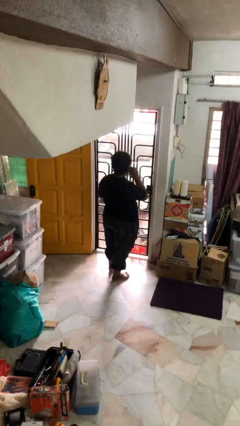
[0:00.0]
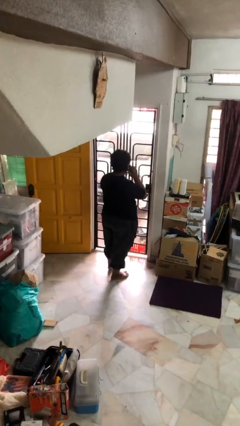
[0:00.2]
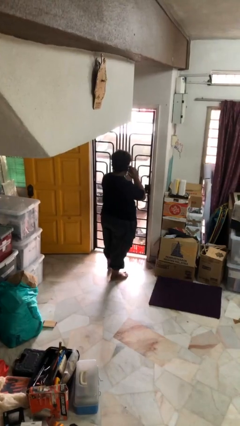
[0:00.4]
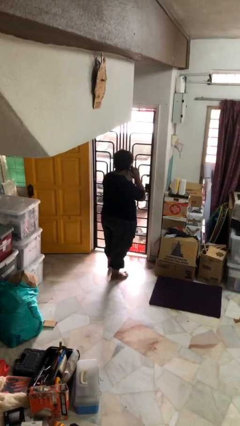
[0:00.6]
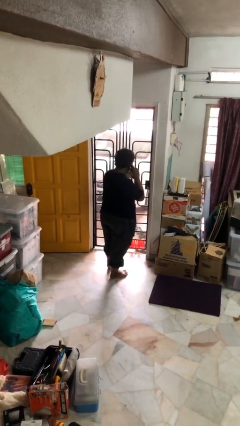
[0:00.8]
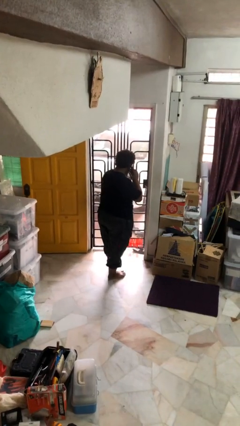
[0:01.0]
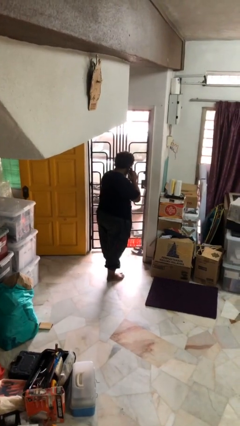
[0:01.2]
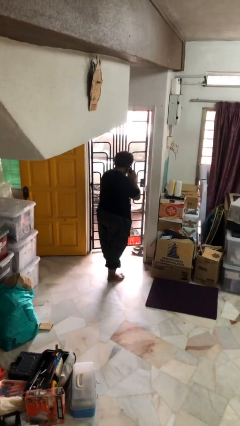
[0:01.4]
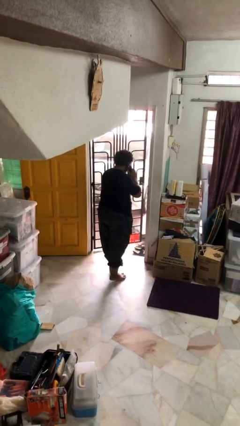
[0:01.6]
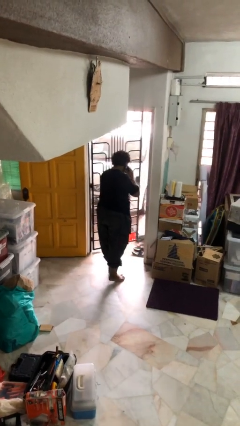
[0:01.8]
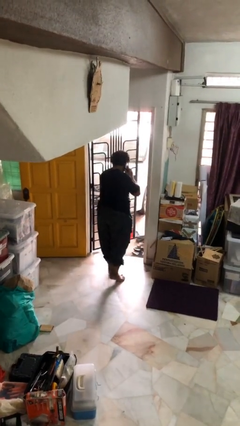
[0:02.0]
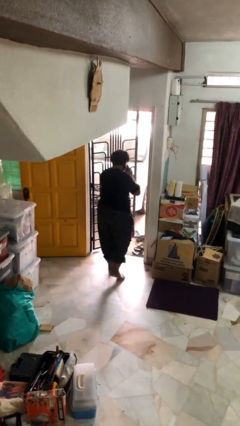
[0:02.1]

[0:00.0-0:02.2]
person opens facility door

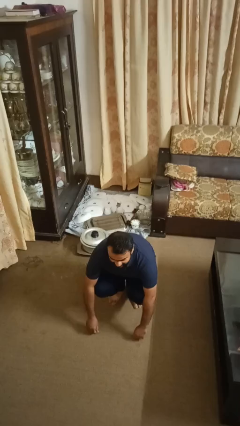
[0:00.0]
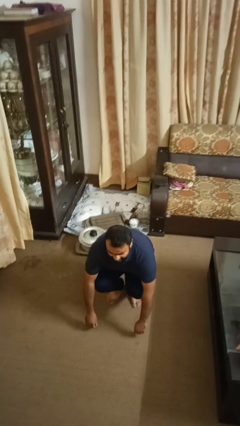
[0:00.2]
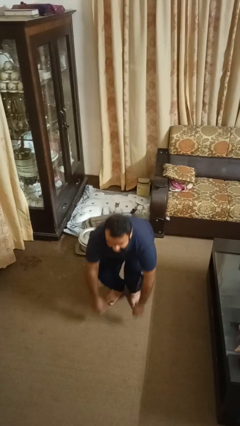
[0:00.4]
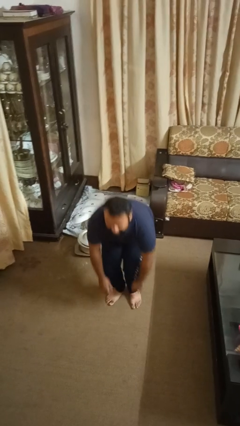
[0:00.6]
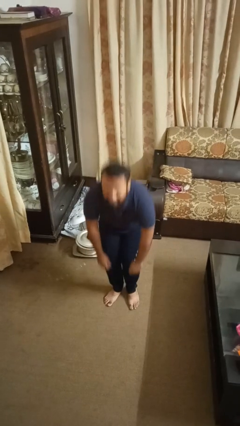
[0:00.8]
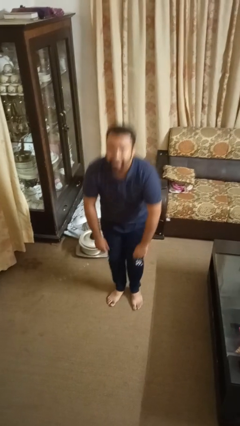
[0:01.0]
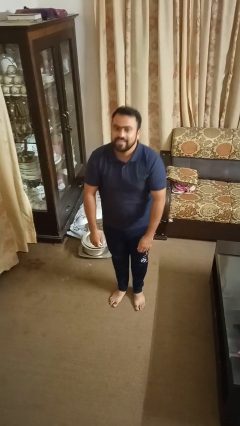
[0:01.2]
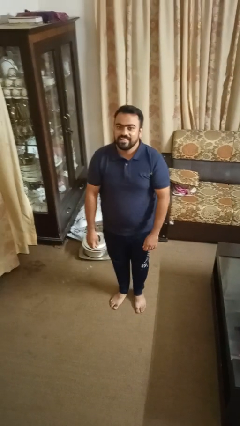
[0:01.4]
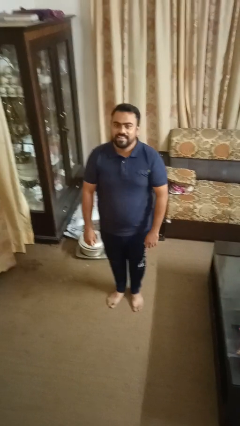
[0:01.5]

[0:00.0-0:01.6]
person stands up

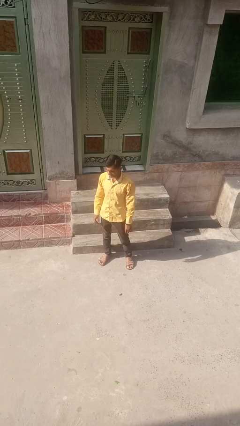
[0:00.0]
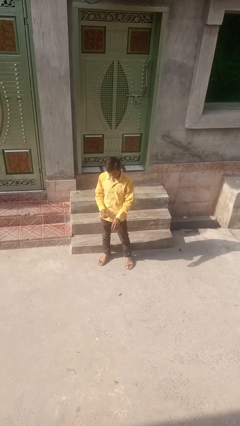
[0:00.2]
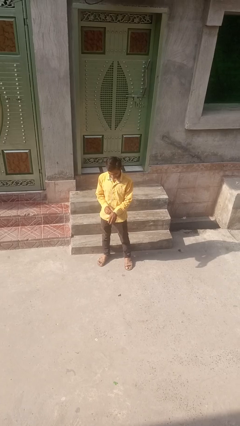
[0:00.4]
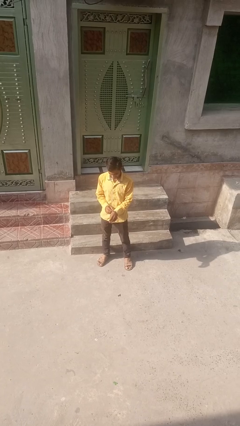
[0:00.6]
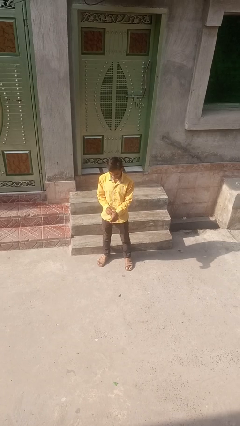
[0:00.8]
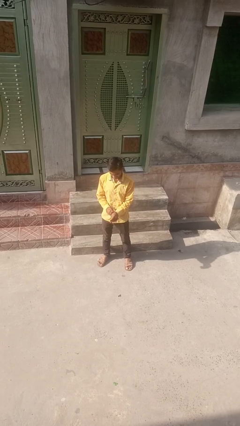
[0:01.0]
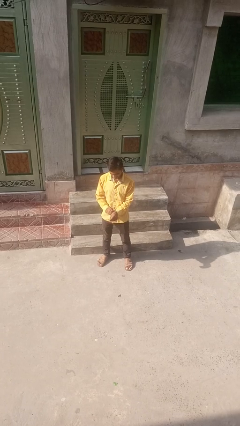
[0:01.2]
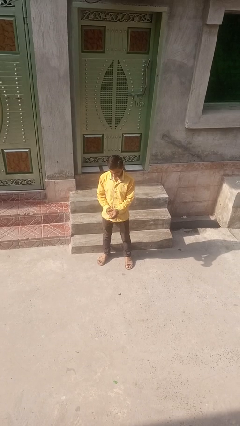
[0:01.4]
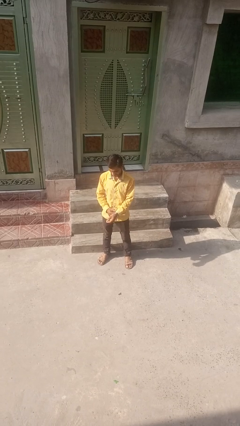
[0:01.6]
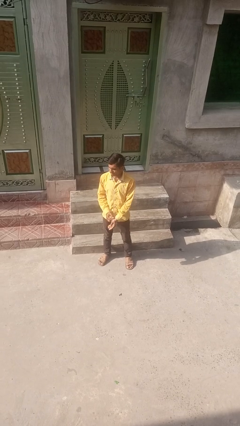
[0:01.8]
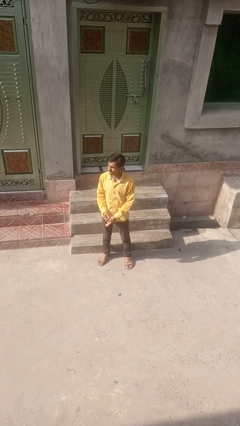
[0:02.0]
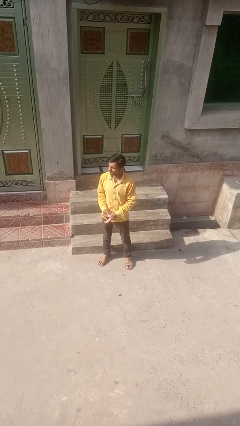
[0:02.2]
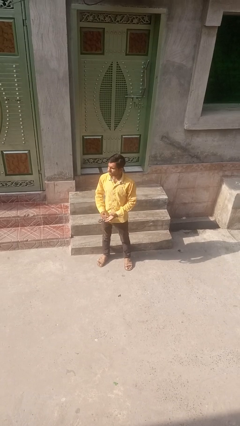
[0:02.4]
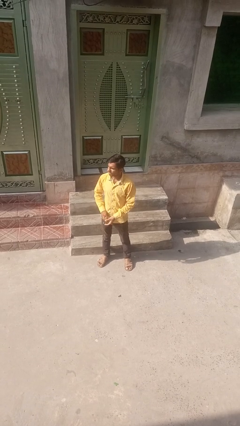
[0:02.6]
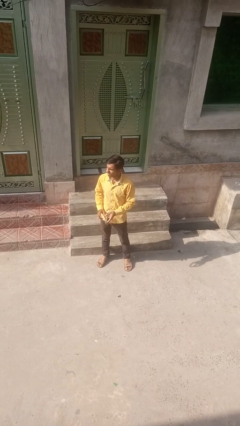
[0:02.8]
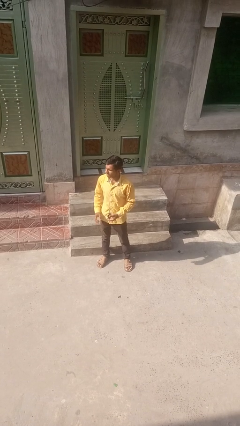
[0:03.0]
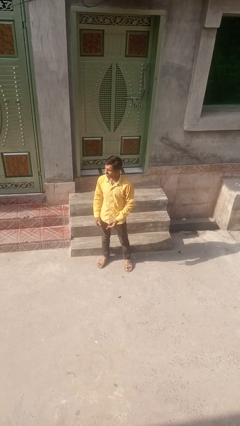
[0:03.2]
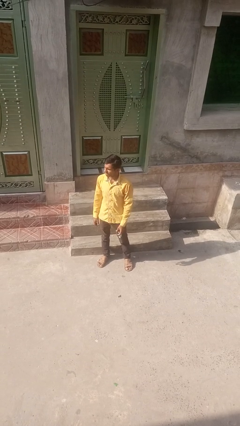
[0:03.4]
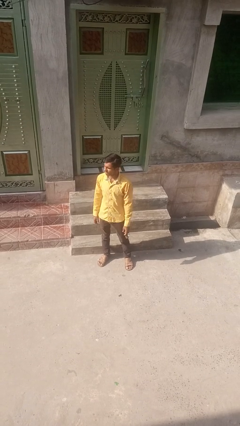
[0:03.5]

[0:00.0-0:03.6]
person takes off wristwatch

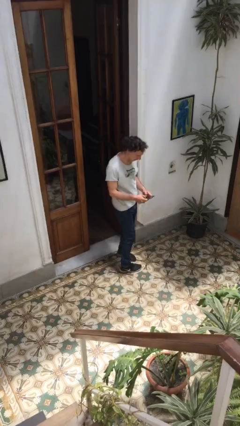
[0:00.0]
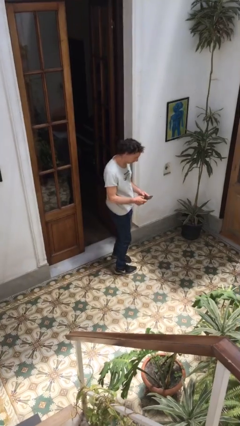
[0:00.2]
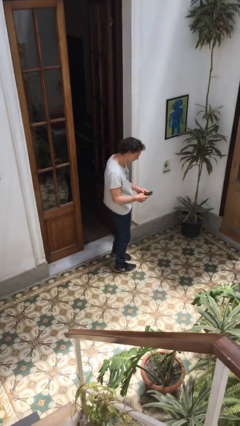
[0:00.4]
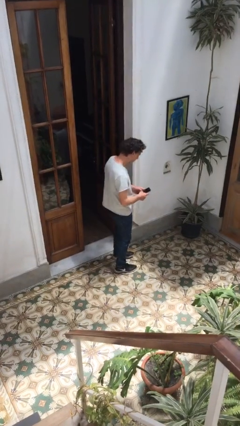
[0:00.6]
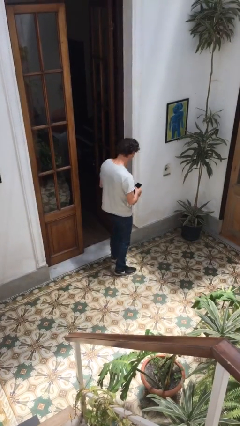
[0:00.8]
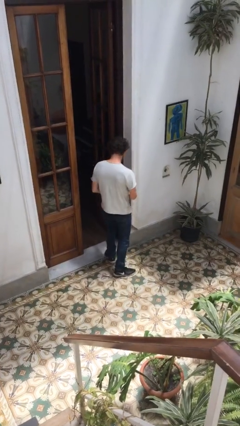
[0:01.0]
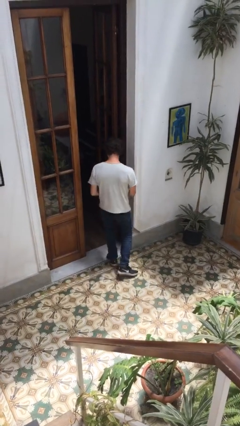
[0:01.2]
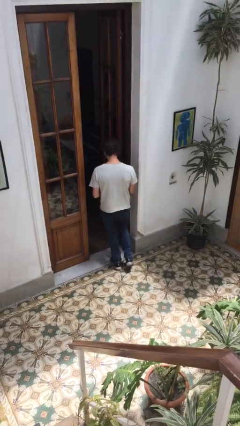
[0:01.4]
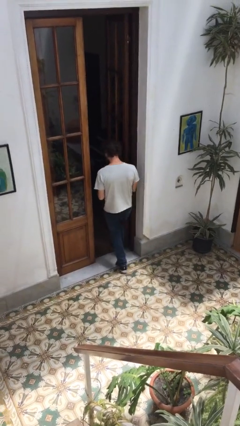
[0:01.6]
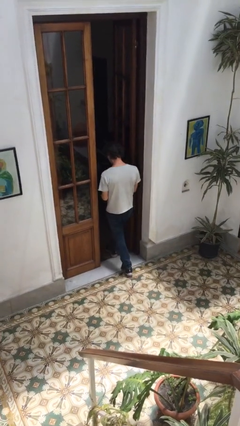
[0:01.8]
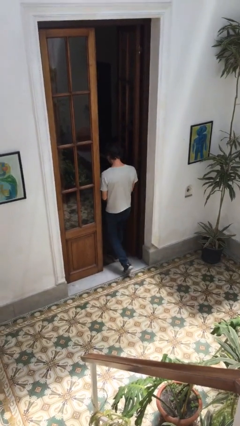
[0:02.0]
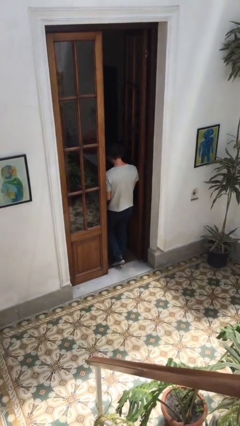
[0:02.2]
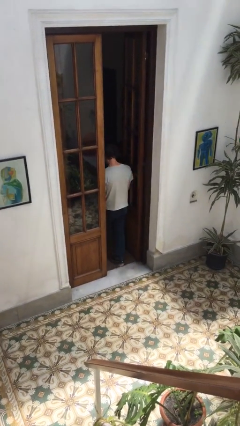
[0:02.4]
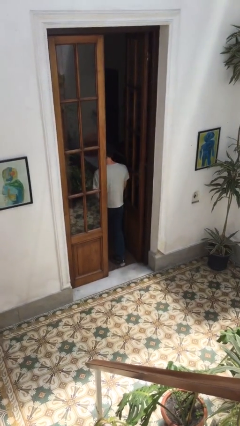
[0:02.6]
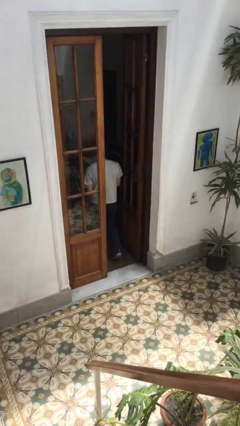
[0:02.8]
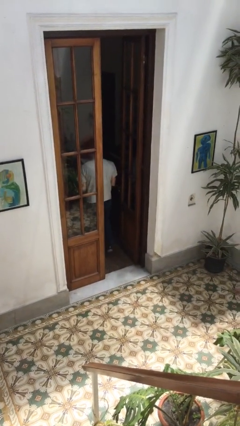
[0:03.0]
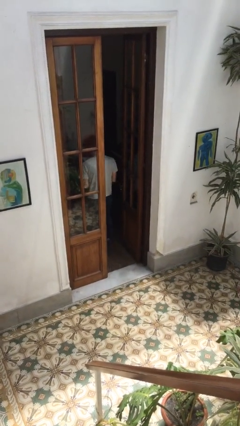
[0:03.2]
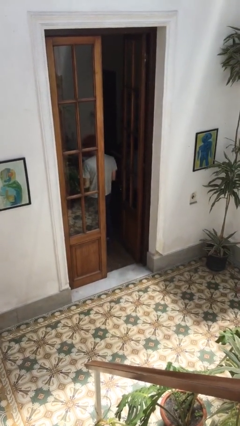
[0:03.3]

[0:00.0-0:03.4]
person exits scene through structure

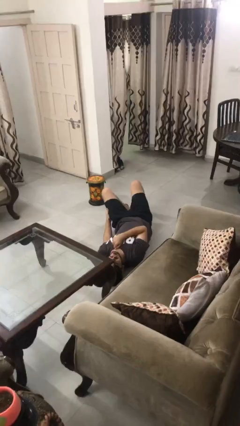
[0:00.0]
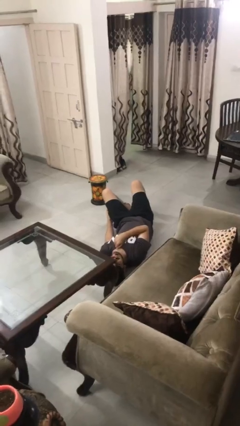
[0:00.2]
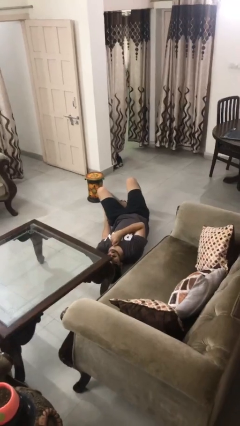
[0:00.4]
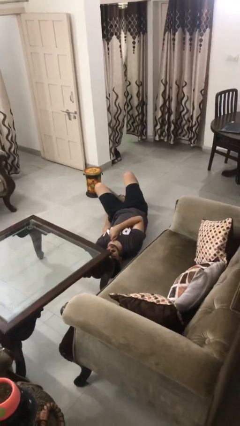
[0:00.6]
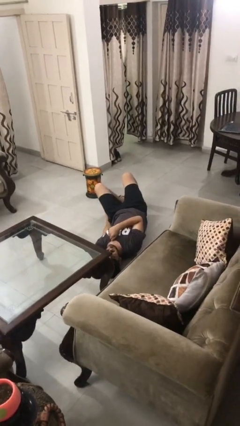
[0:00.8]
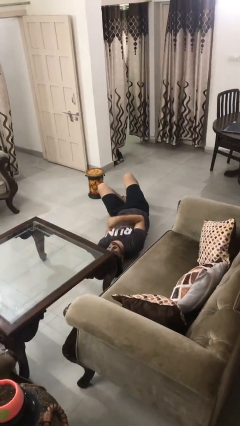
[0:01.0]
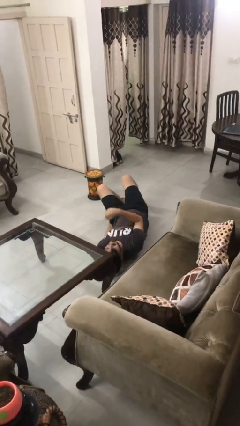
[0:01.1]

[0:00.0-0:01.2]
person lies down on floor

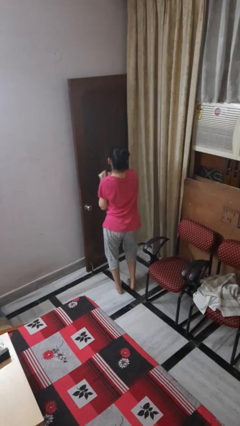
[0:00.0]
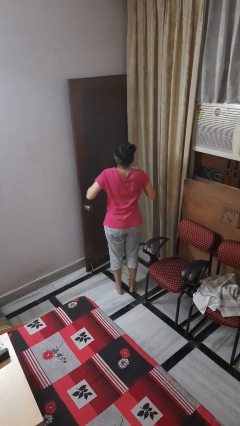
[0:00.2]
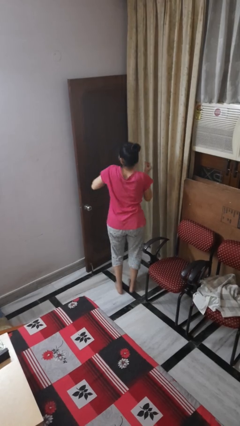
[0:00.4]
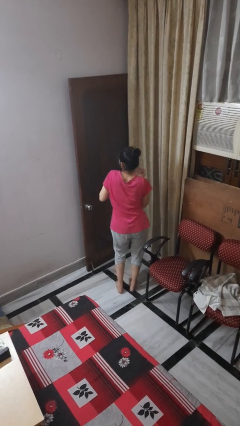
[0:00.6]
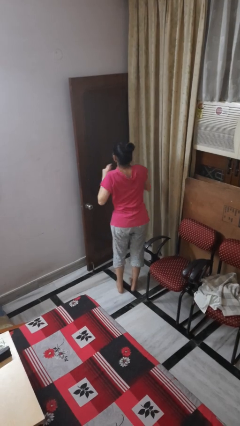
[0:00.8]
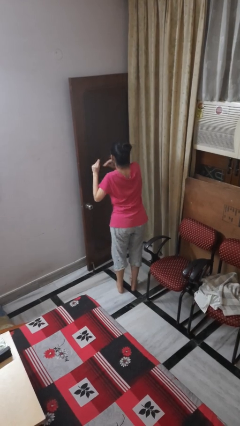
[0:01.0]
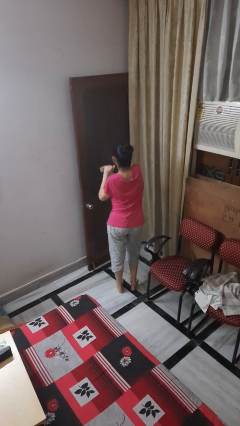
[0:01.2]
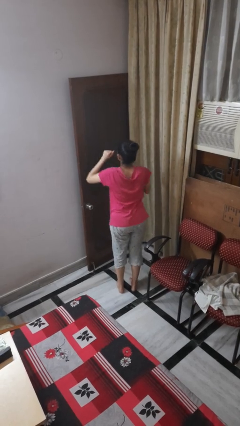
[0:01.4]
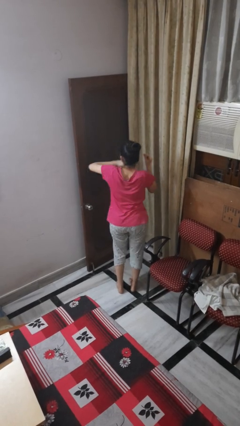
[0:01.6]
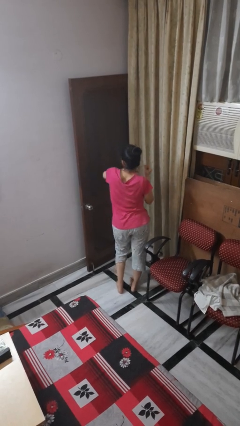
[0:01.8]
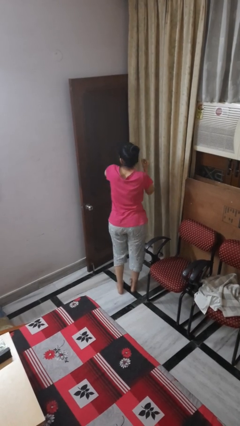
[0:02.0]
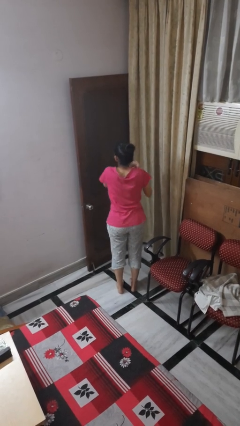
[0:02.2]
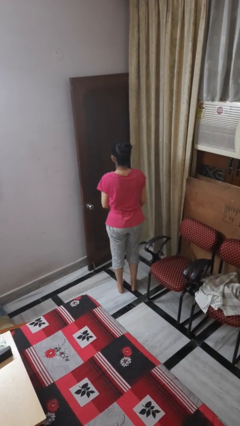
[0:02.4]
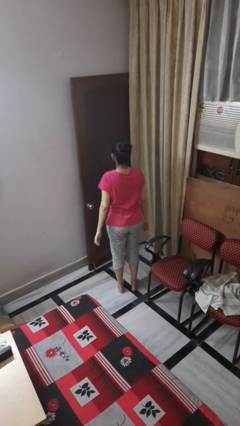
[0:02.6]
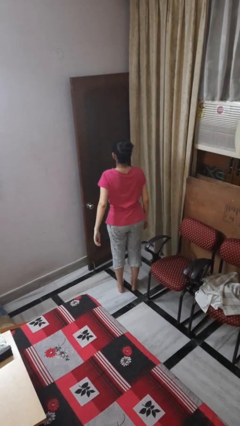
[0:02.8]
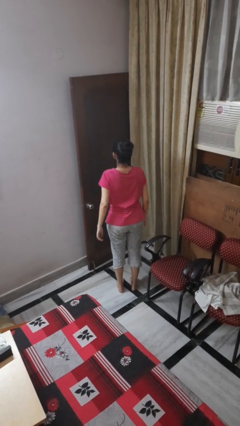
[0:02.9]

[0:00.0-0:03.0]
person dances in place

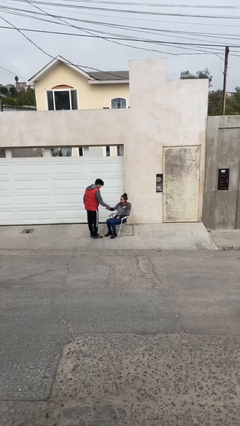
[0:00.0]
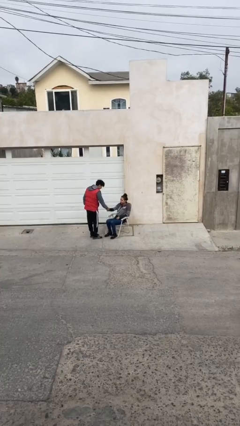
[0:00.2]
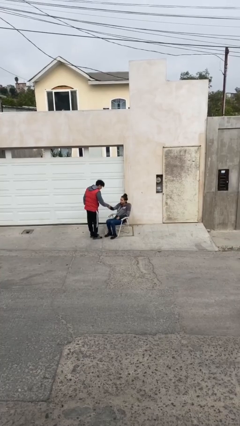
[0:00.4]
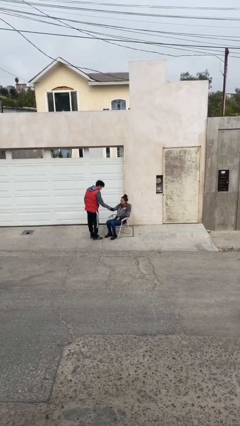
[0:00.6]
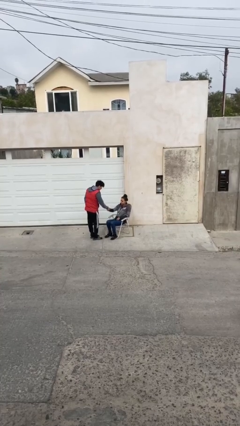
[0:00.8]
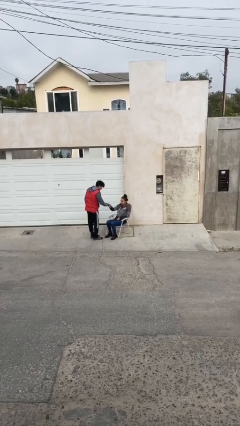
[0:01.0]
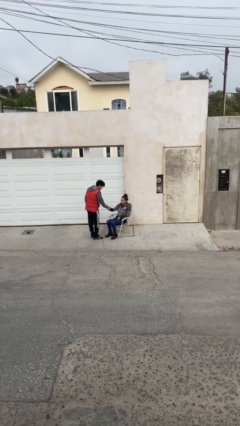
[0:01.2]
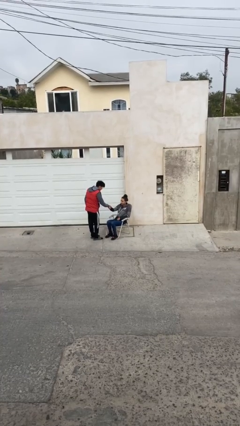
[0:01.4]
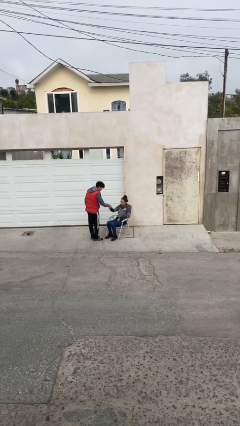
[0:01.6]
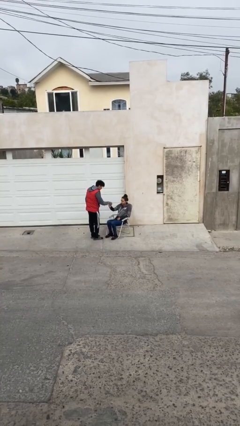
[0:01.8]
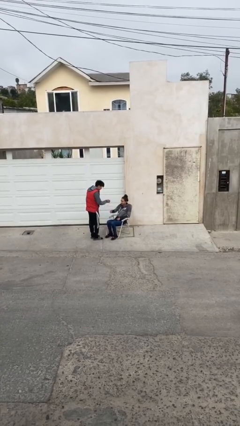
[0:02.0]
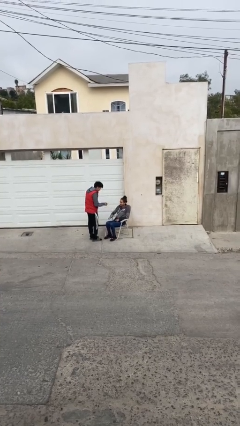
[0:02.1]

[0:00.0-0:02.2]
person shakes hand

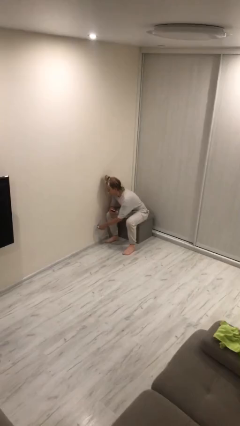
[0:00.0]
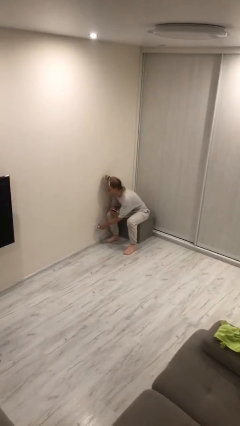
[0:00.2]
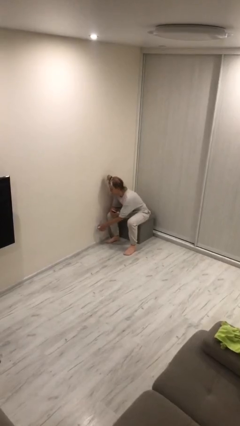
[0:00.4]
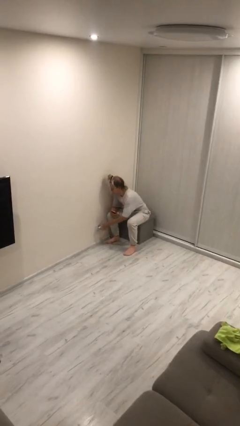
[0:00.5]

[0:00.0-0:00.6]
person plugs into electrical socket
